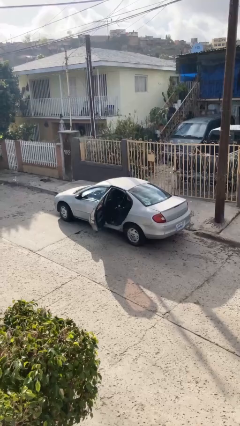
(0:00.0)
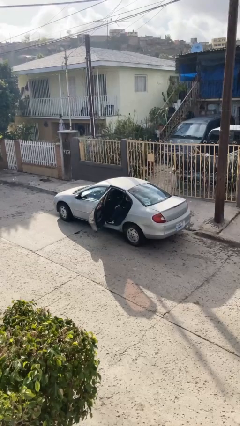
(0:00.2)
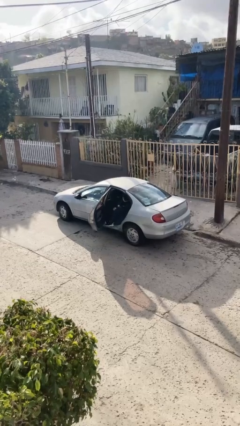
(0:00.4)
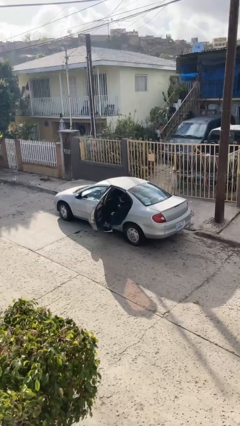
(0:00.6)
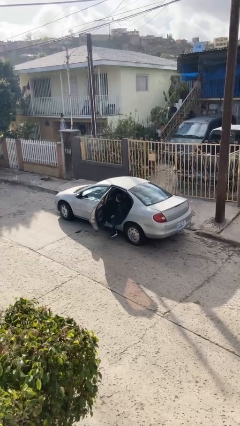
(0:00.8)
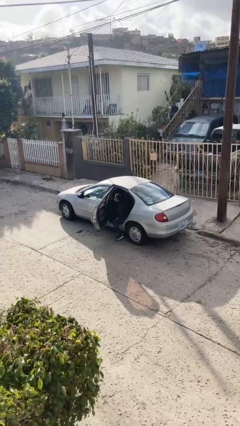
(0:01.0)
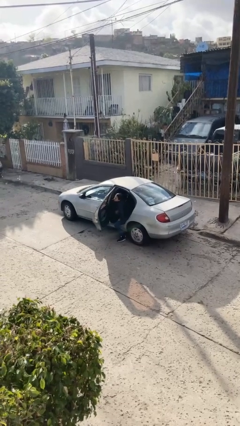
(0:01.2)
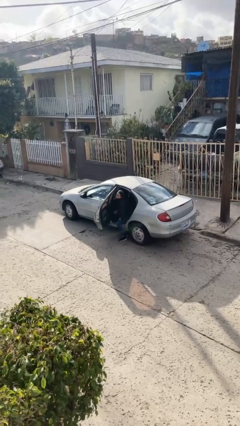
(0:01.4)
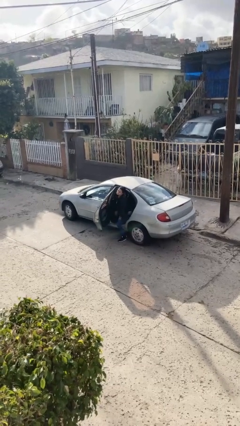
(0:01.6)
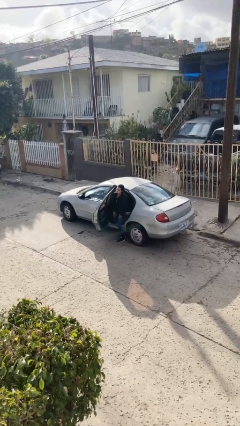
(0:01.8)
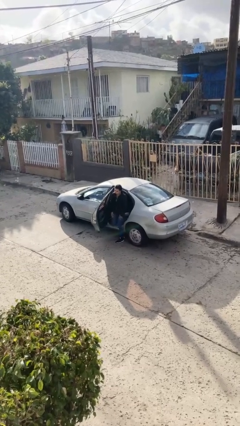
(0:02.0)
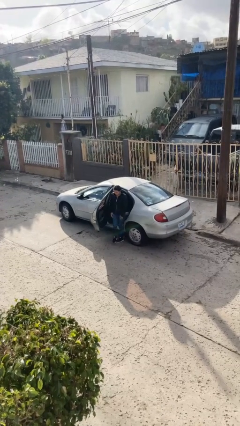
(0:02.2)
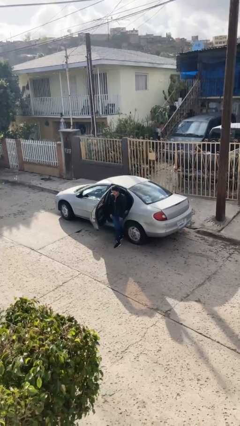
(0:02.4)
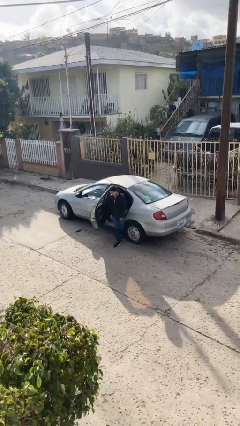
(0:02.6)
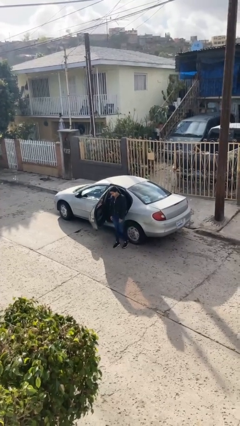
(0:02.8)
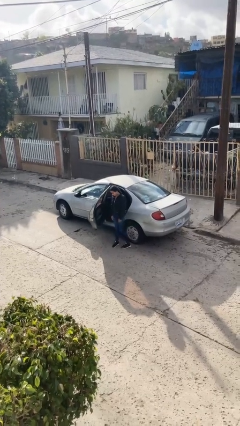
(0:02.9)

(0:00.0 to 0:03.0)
person exits car

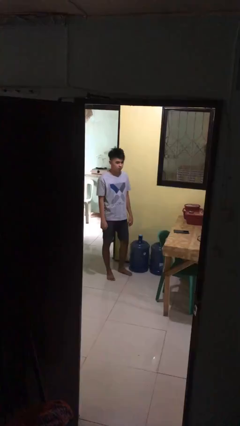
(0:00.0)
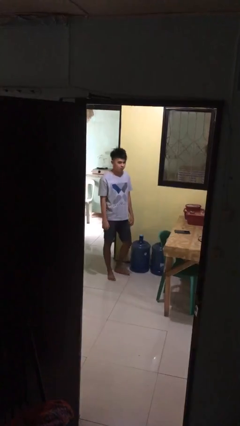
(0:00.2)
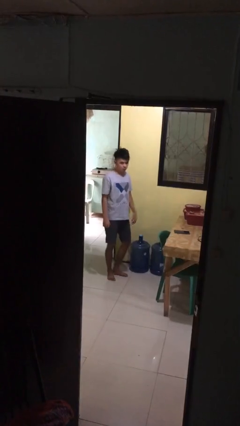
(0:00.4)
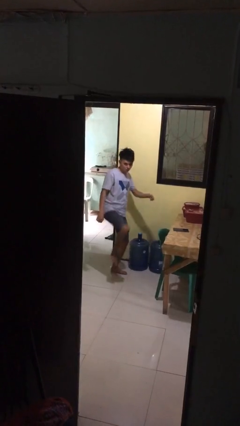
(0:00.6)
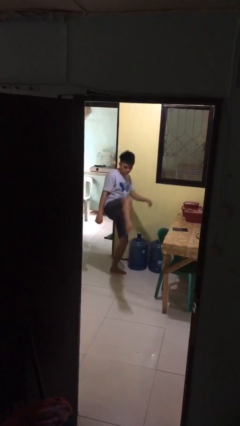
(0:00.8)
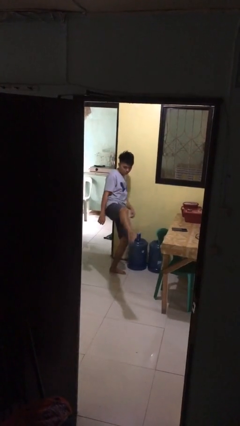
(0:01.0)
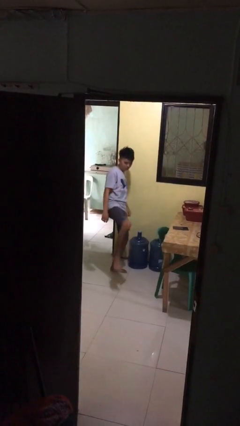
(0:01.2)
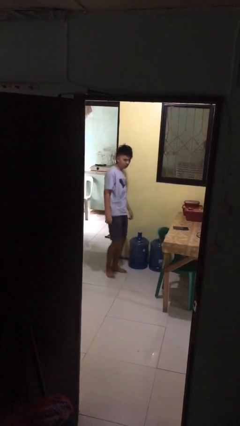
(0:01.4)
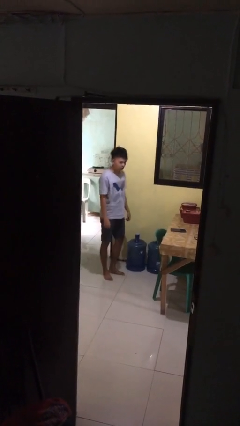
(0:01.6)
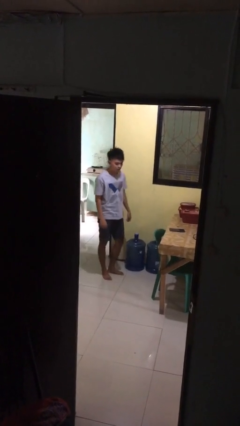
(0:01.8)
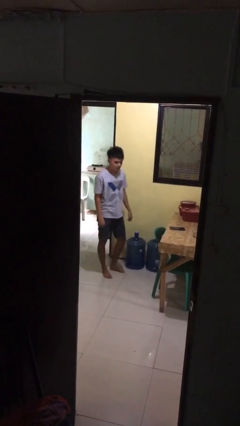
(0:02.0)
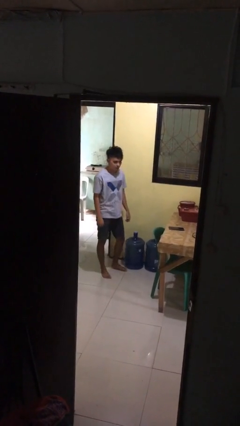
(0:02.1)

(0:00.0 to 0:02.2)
person karate kicks

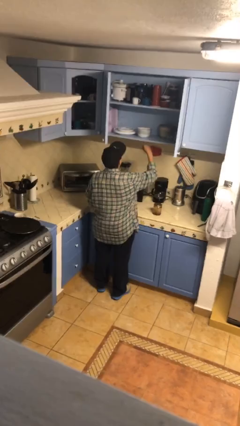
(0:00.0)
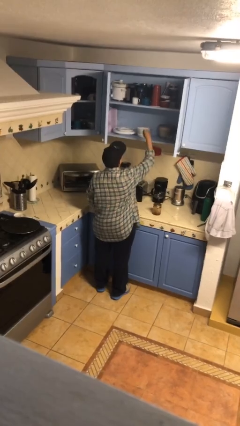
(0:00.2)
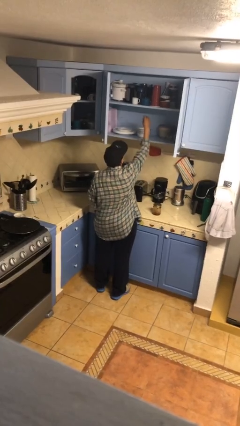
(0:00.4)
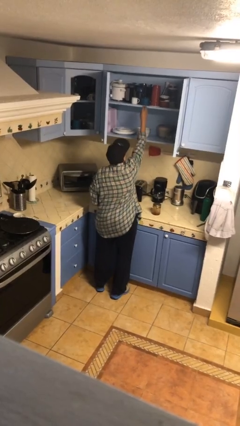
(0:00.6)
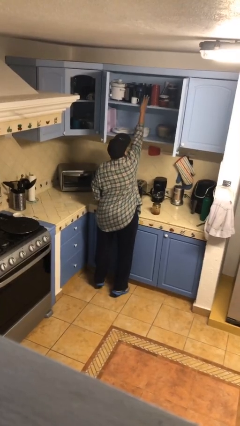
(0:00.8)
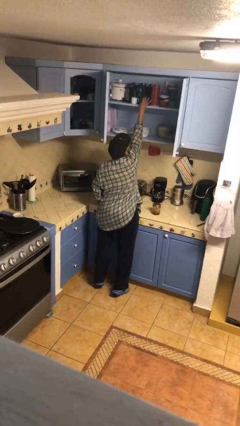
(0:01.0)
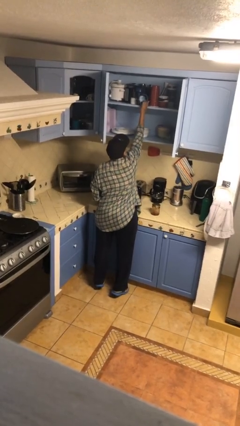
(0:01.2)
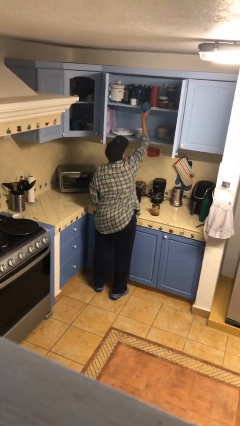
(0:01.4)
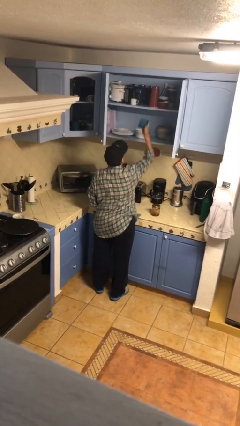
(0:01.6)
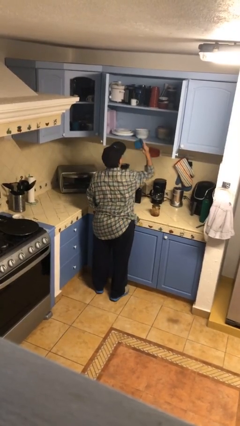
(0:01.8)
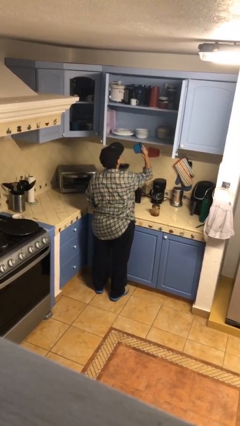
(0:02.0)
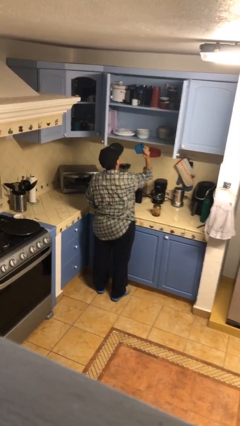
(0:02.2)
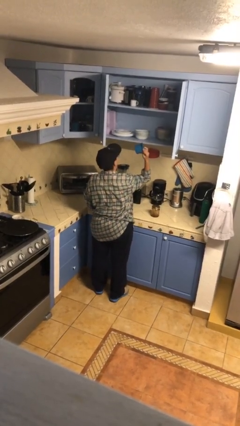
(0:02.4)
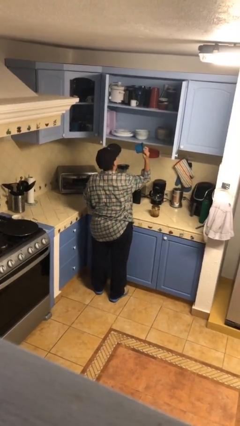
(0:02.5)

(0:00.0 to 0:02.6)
person picks up object from cabinet

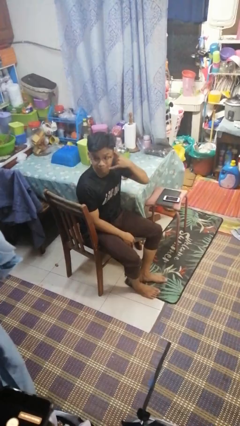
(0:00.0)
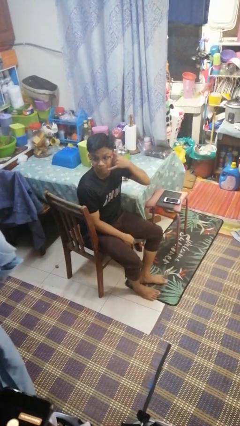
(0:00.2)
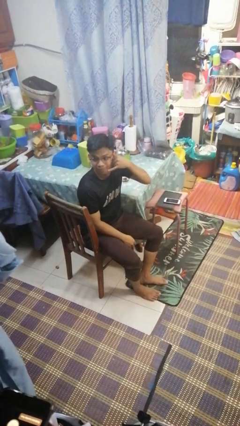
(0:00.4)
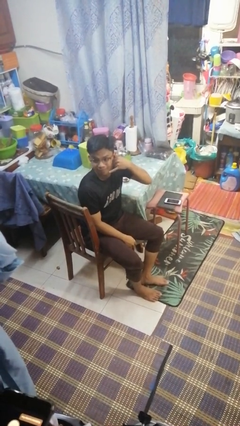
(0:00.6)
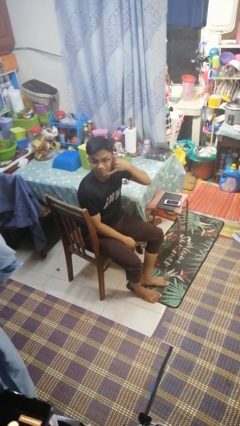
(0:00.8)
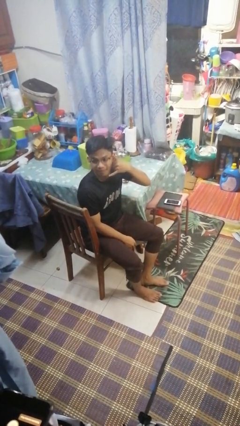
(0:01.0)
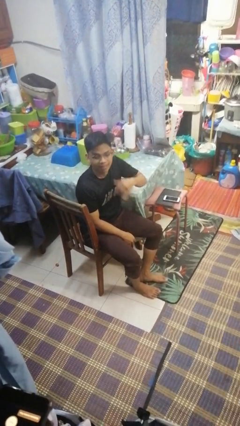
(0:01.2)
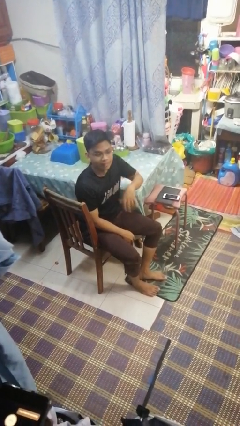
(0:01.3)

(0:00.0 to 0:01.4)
person gestures call me

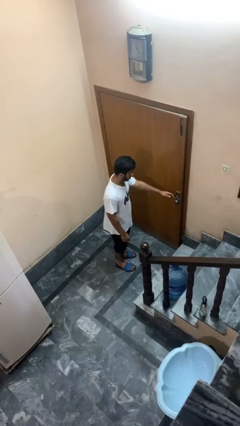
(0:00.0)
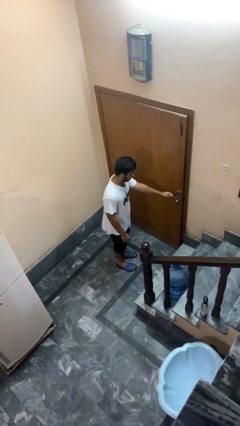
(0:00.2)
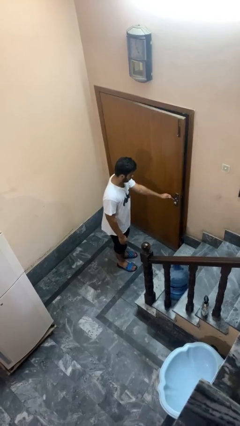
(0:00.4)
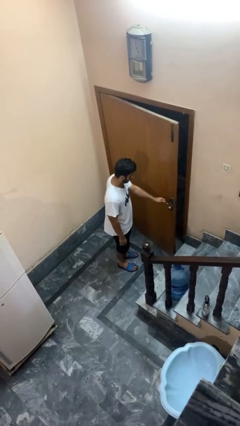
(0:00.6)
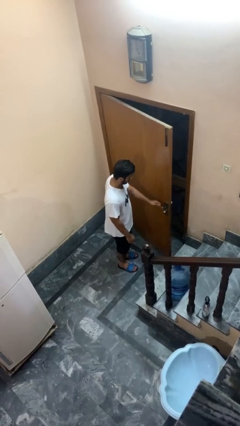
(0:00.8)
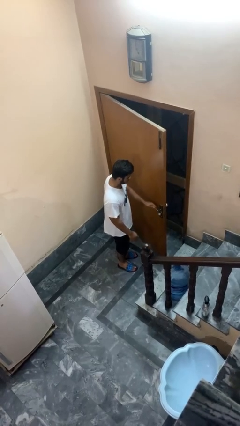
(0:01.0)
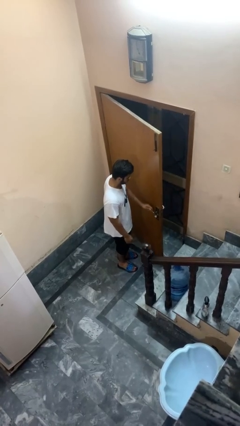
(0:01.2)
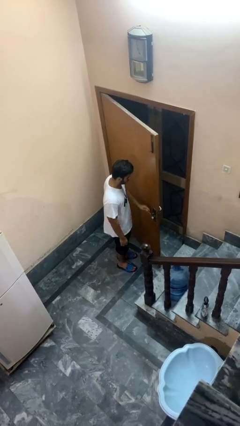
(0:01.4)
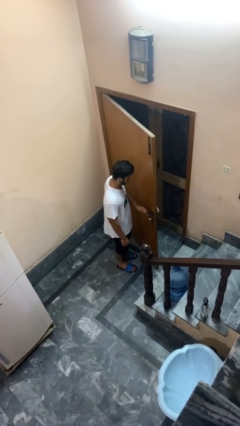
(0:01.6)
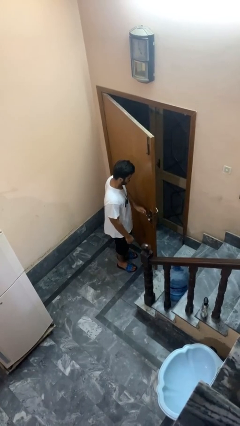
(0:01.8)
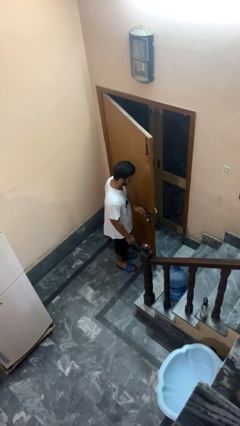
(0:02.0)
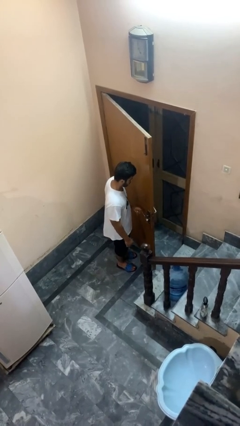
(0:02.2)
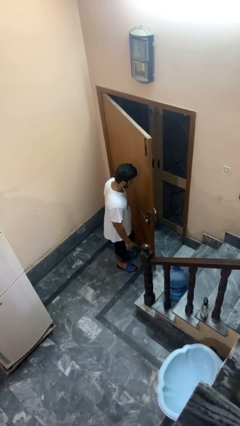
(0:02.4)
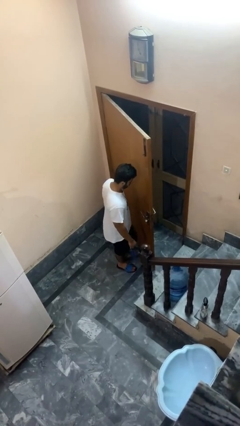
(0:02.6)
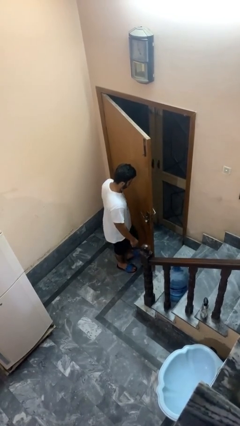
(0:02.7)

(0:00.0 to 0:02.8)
person opens facility door

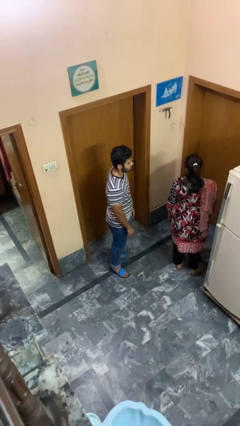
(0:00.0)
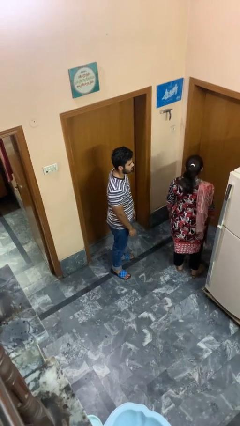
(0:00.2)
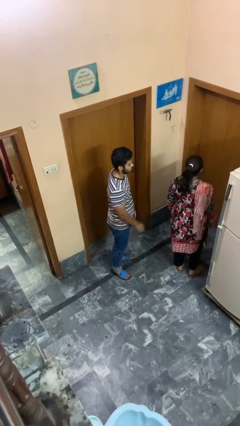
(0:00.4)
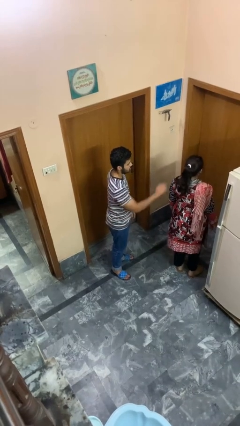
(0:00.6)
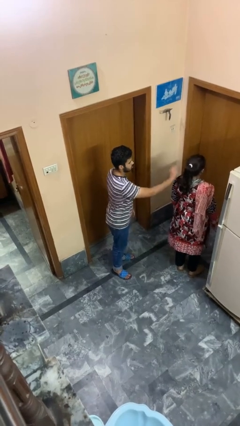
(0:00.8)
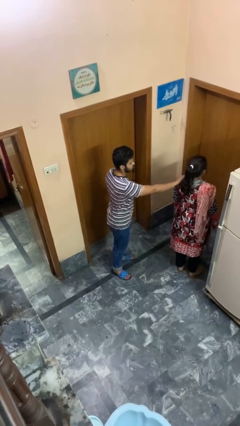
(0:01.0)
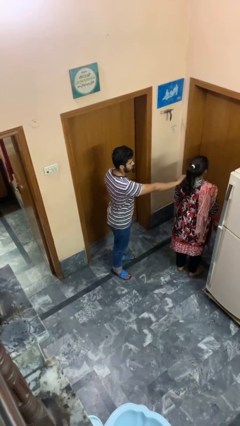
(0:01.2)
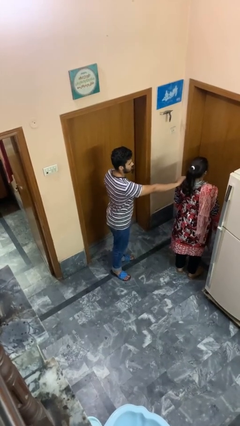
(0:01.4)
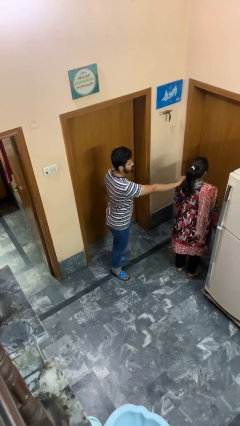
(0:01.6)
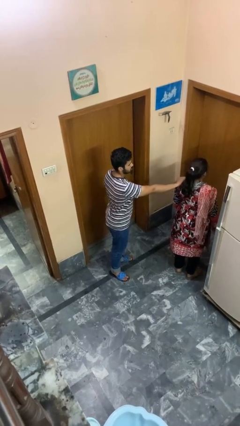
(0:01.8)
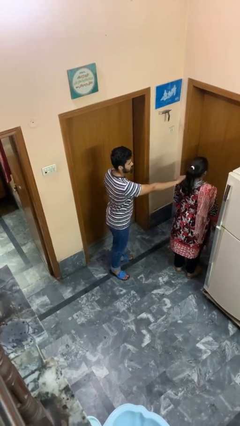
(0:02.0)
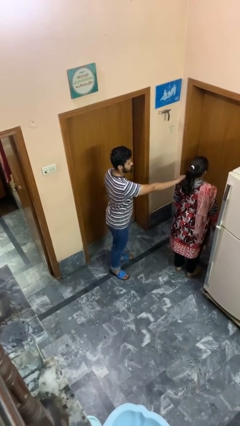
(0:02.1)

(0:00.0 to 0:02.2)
person grabs person by shoulder

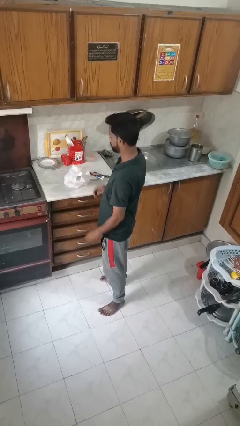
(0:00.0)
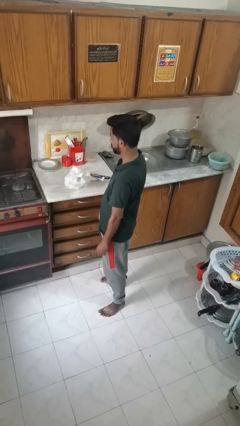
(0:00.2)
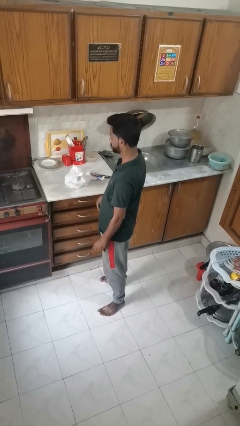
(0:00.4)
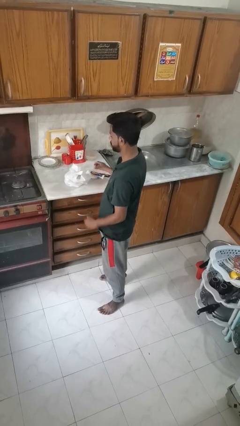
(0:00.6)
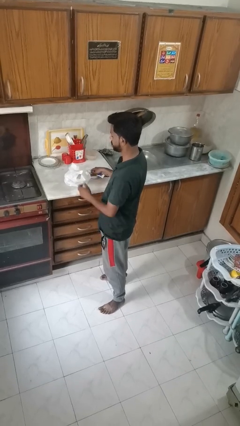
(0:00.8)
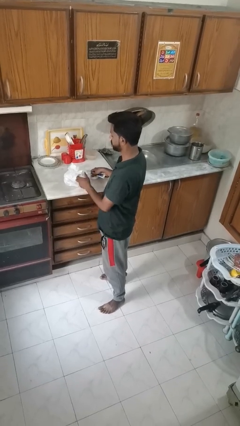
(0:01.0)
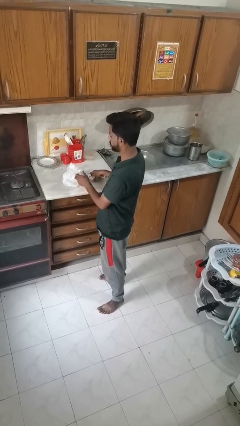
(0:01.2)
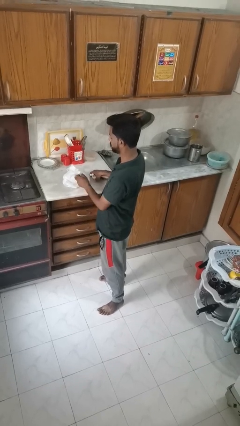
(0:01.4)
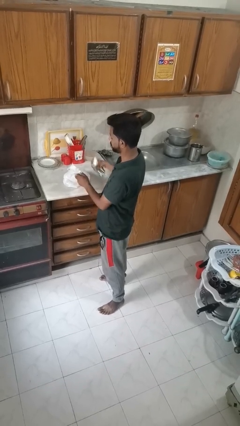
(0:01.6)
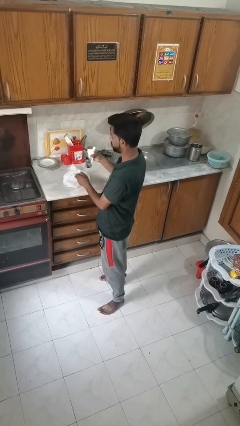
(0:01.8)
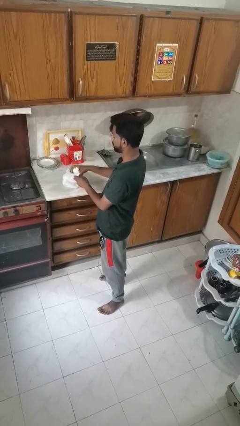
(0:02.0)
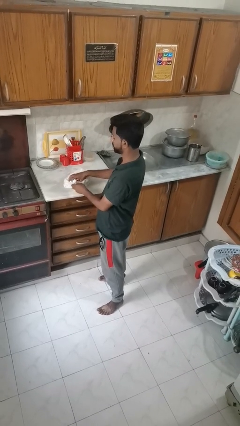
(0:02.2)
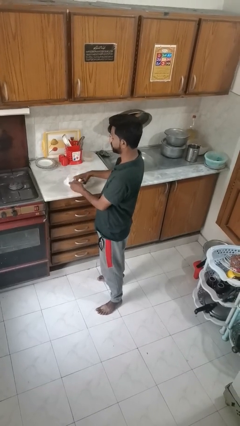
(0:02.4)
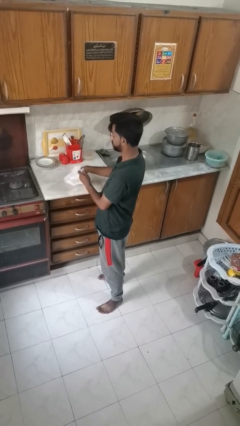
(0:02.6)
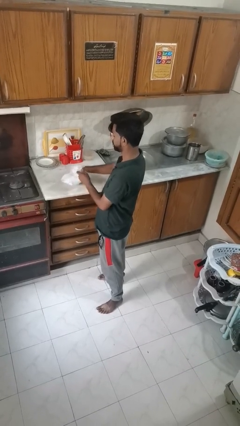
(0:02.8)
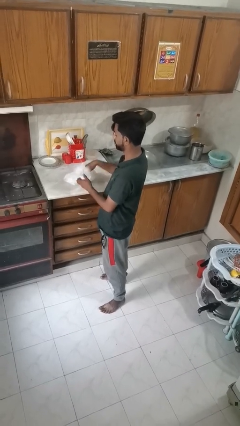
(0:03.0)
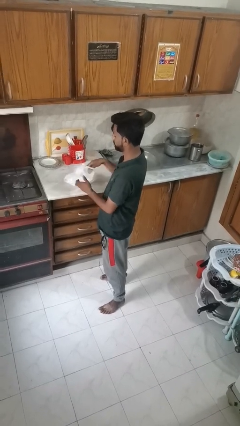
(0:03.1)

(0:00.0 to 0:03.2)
person puts object into bag
